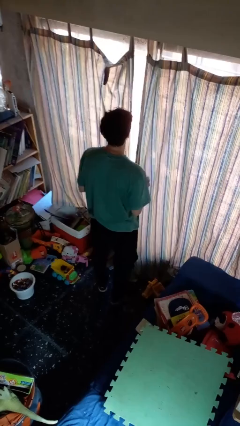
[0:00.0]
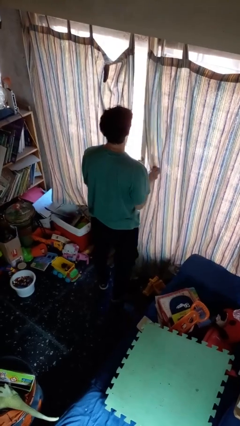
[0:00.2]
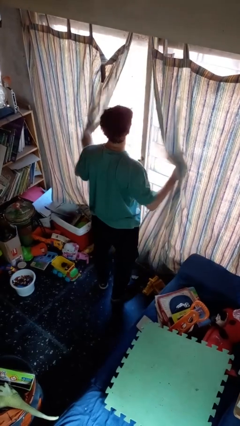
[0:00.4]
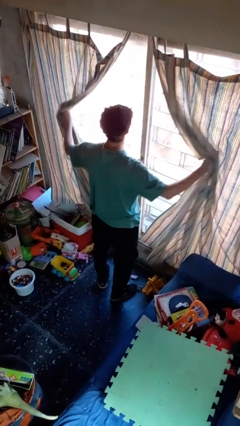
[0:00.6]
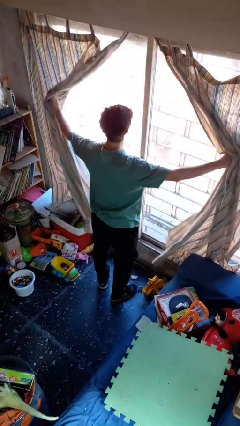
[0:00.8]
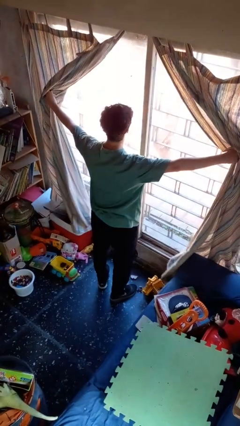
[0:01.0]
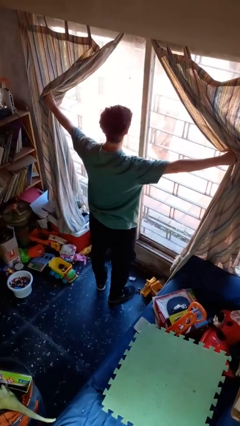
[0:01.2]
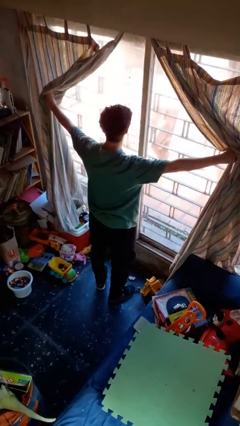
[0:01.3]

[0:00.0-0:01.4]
person opens curtains

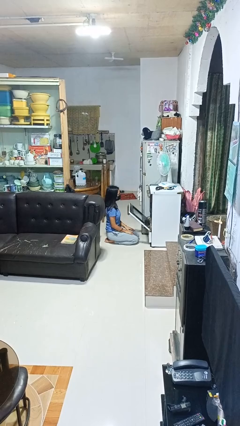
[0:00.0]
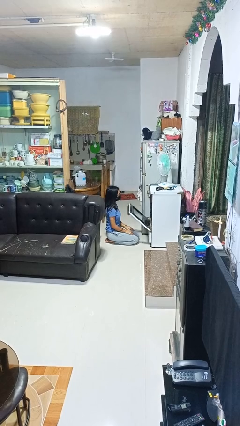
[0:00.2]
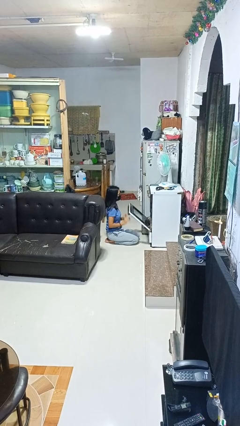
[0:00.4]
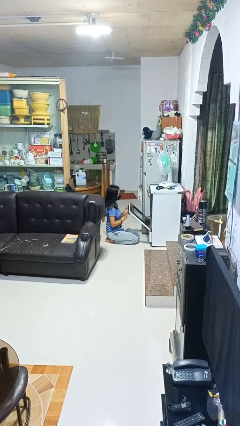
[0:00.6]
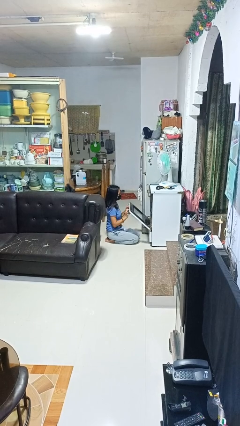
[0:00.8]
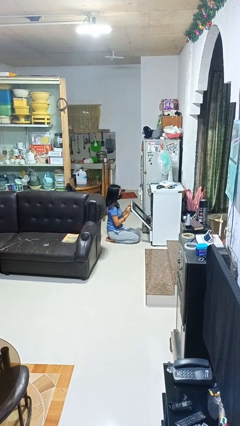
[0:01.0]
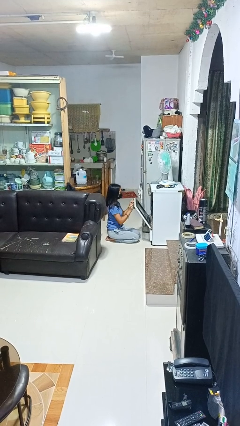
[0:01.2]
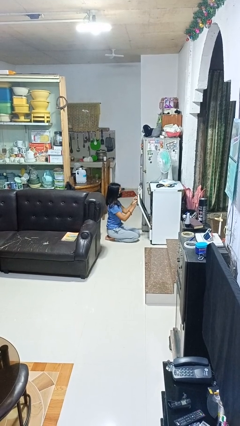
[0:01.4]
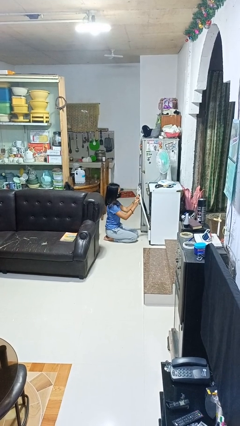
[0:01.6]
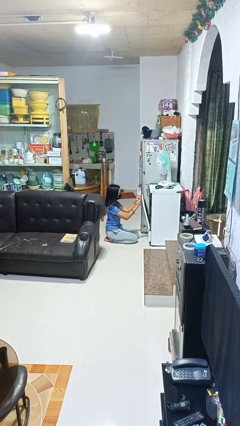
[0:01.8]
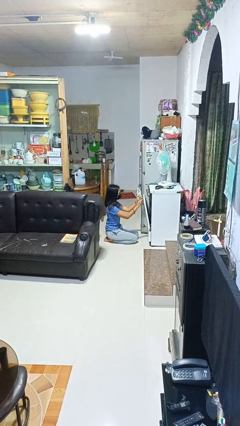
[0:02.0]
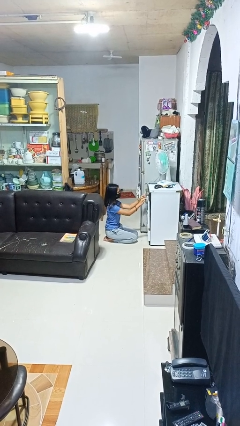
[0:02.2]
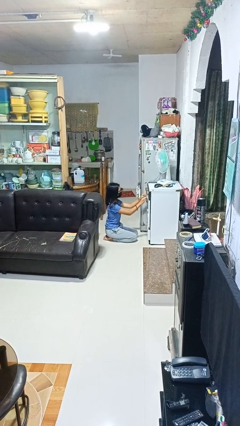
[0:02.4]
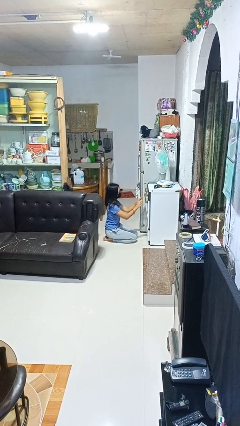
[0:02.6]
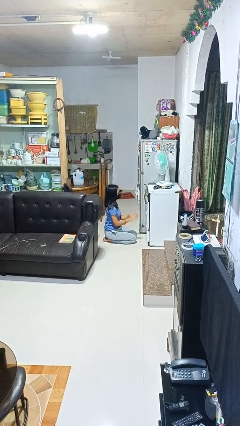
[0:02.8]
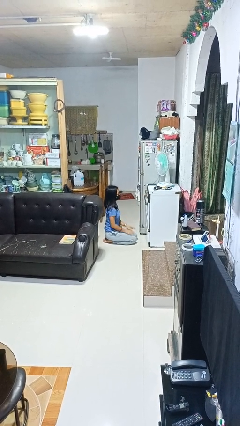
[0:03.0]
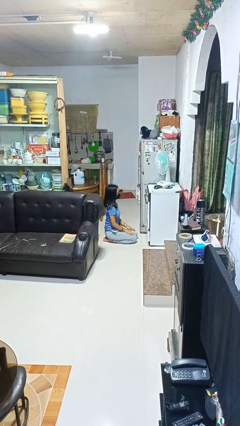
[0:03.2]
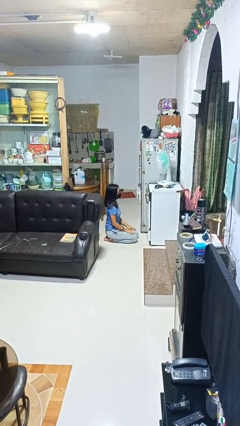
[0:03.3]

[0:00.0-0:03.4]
person closes oven door

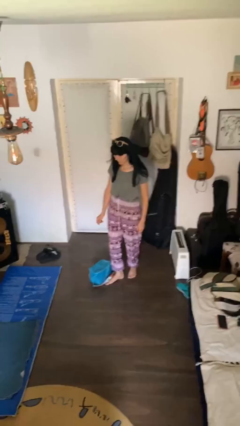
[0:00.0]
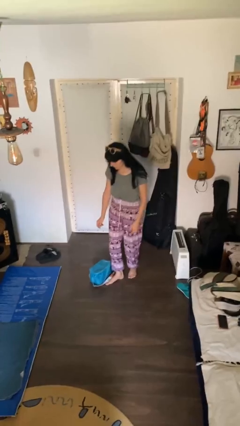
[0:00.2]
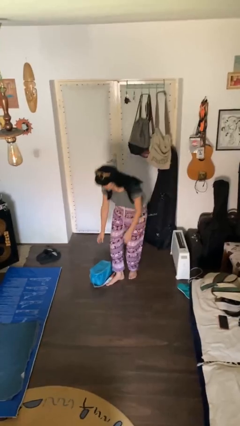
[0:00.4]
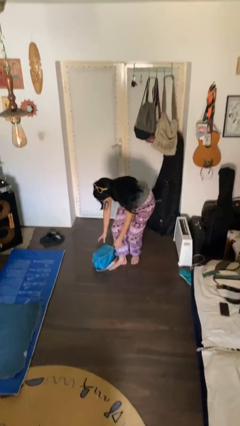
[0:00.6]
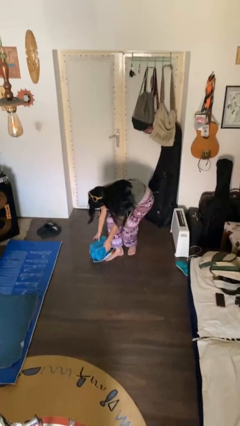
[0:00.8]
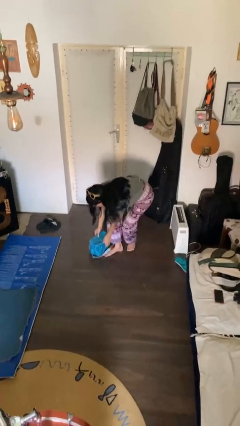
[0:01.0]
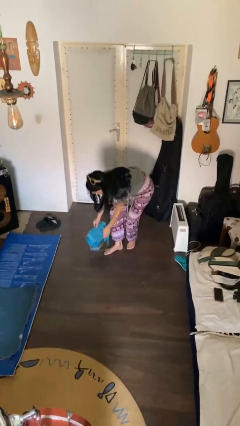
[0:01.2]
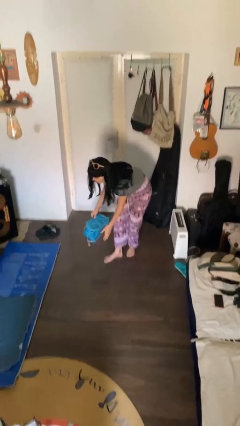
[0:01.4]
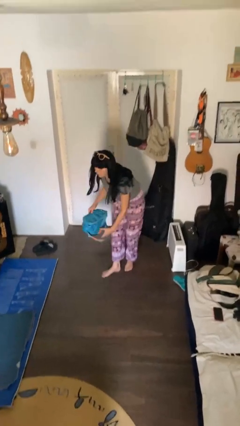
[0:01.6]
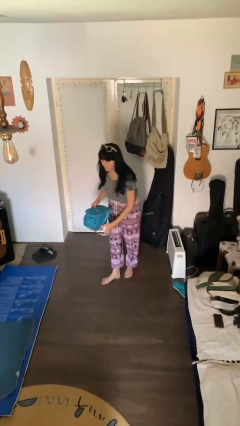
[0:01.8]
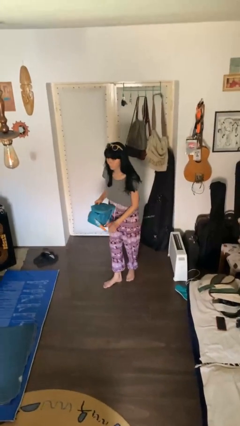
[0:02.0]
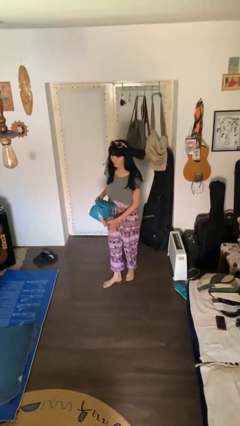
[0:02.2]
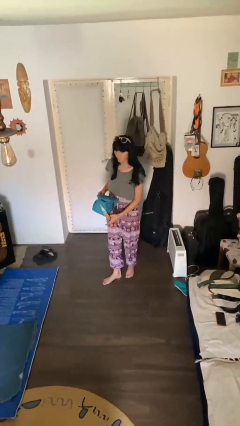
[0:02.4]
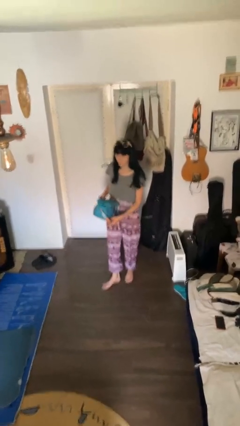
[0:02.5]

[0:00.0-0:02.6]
person picks up object from floor

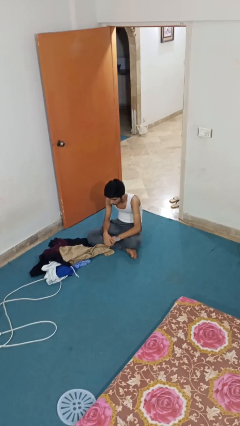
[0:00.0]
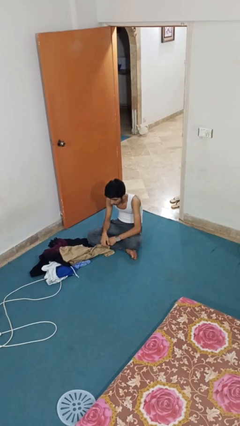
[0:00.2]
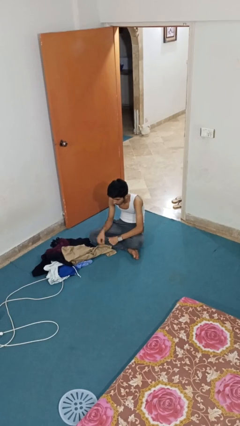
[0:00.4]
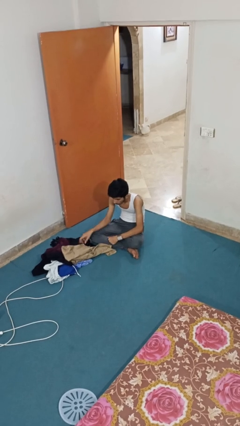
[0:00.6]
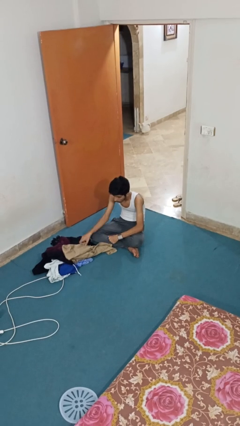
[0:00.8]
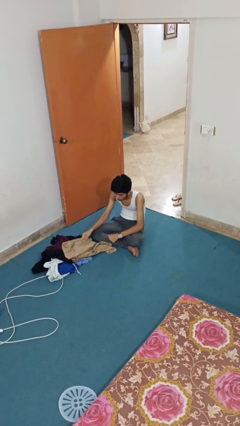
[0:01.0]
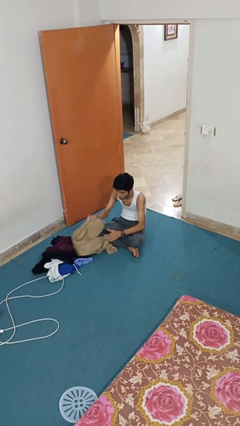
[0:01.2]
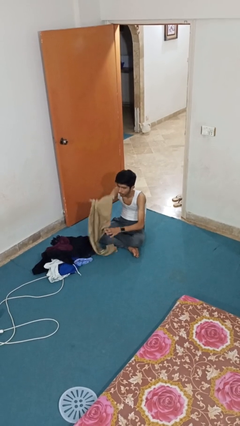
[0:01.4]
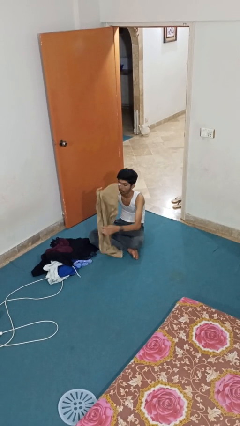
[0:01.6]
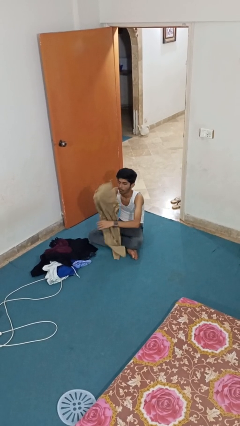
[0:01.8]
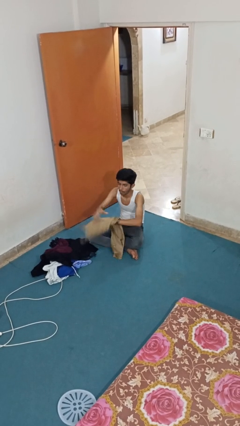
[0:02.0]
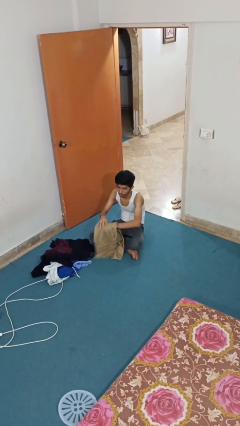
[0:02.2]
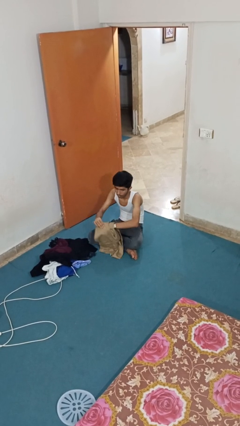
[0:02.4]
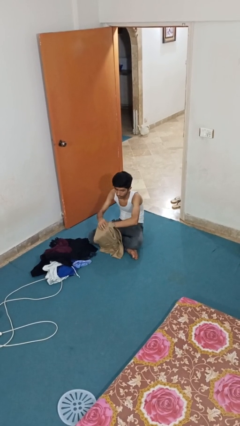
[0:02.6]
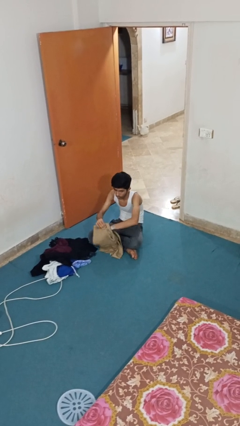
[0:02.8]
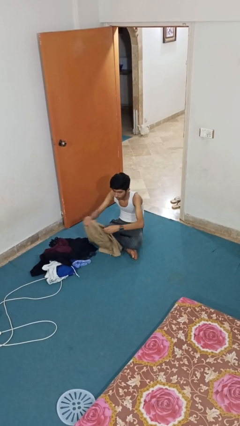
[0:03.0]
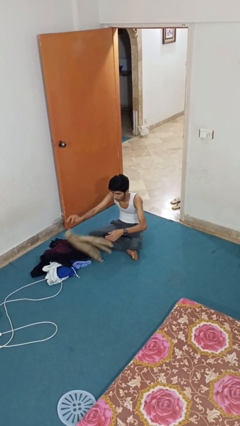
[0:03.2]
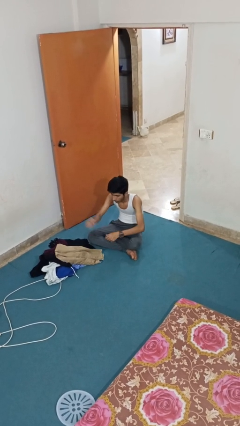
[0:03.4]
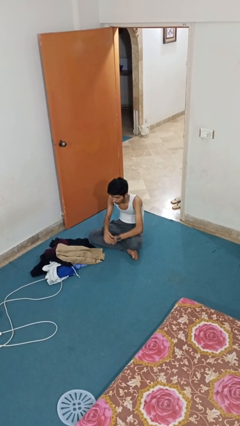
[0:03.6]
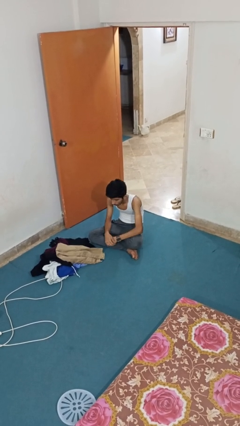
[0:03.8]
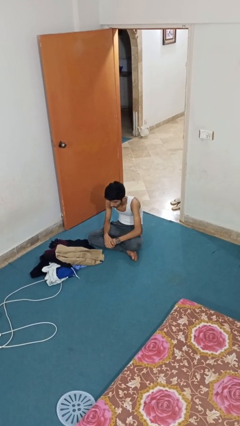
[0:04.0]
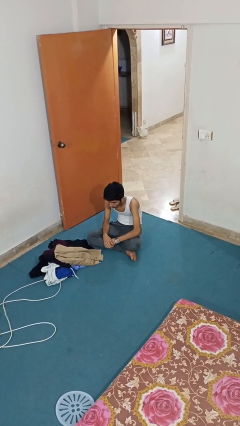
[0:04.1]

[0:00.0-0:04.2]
person folds pants

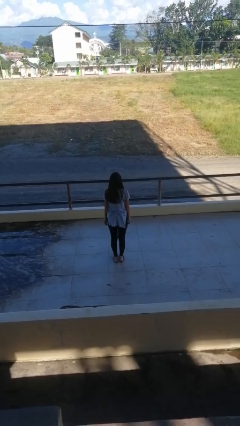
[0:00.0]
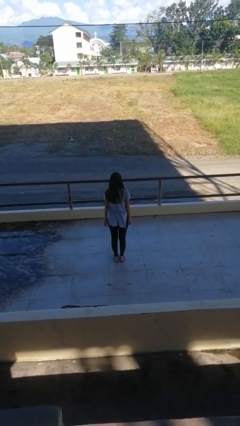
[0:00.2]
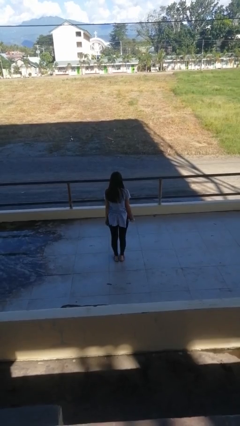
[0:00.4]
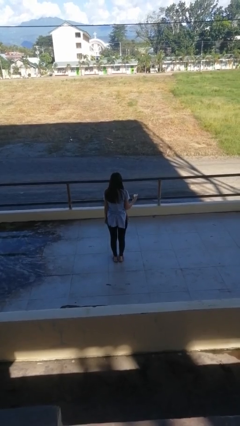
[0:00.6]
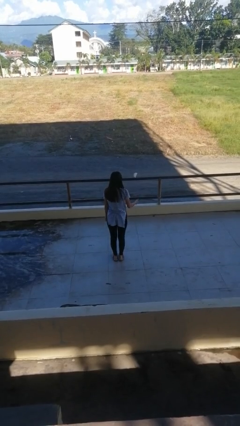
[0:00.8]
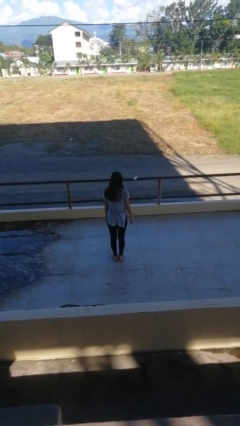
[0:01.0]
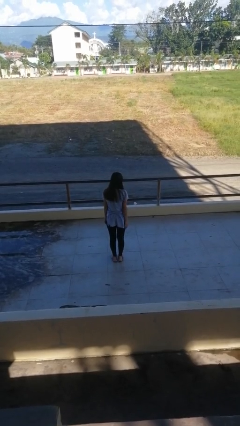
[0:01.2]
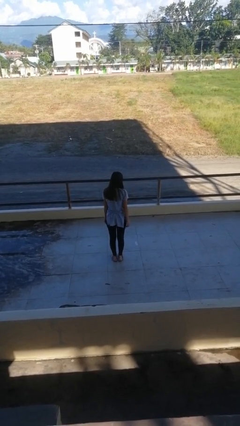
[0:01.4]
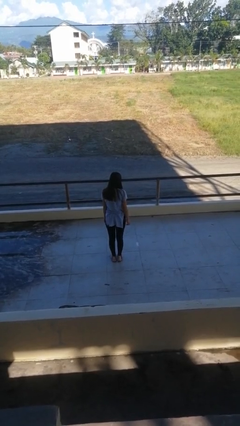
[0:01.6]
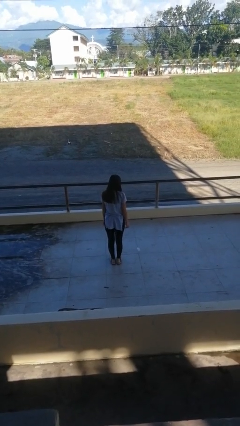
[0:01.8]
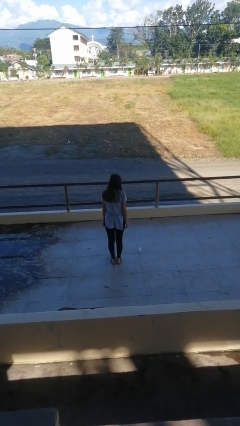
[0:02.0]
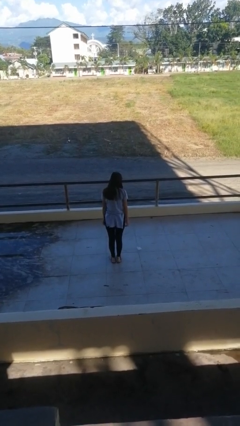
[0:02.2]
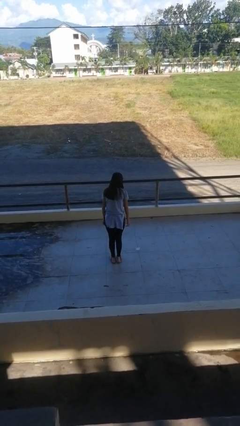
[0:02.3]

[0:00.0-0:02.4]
person throws object into air

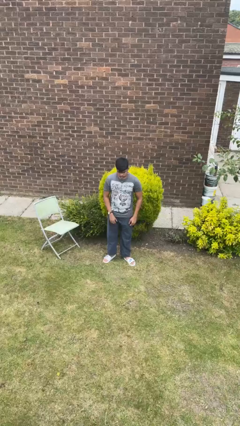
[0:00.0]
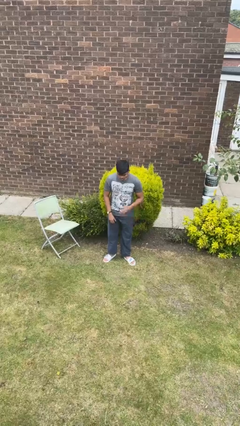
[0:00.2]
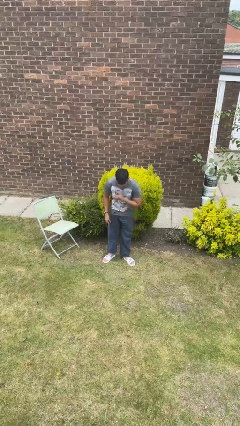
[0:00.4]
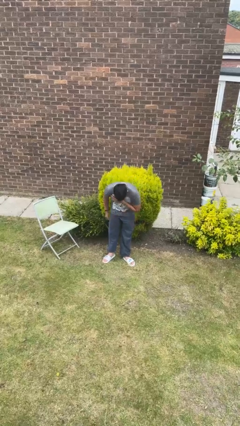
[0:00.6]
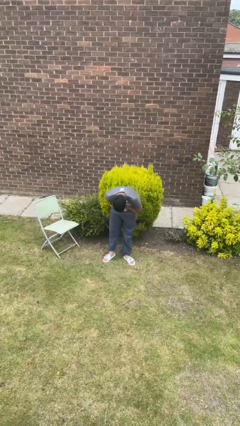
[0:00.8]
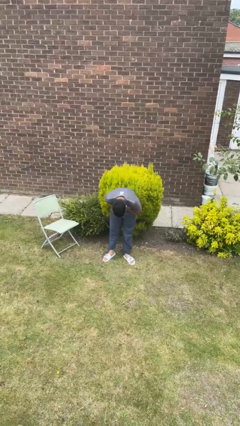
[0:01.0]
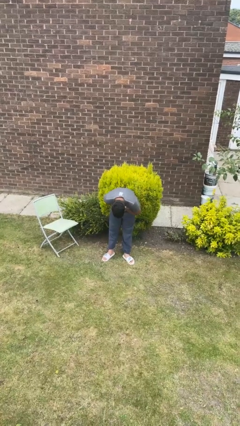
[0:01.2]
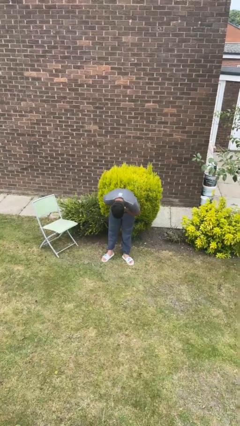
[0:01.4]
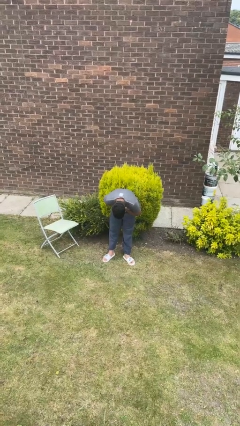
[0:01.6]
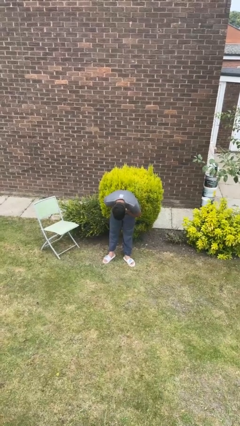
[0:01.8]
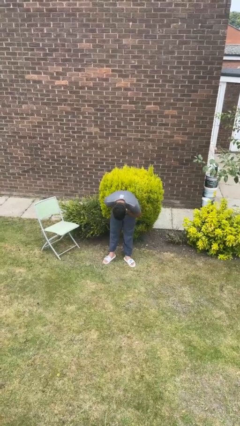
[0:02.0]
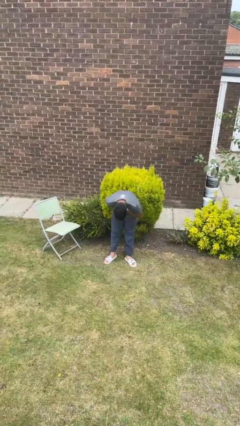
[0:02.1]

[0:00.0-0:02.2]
person bows

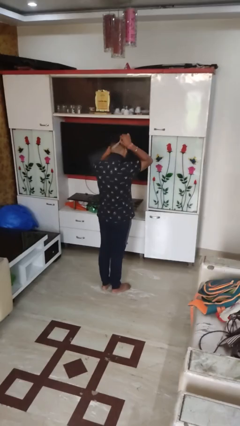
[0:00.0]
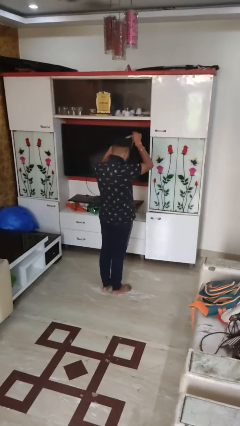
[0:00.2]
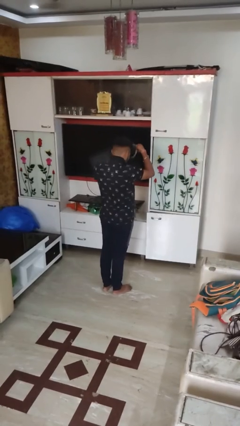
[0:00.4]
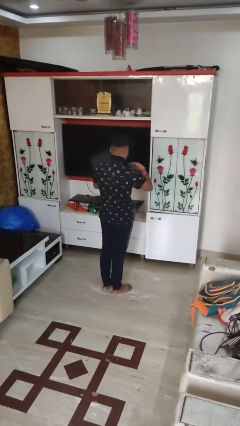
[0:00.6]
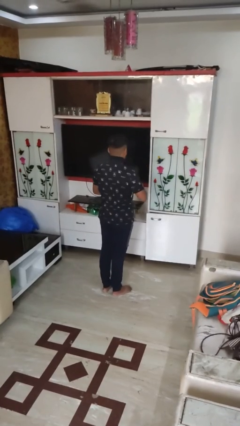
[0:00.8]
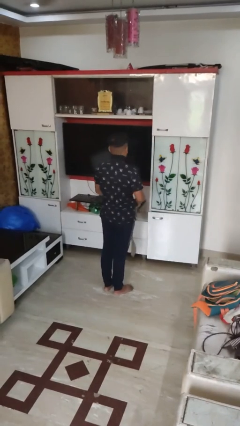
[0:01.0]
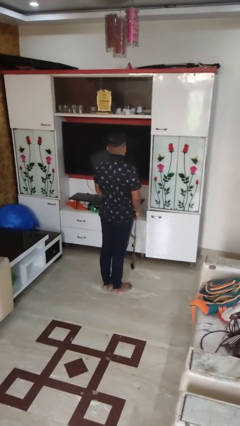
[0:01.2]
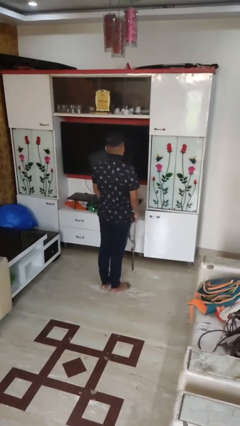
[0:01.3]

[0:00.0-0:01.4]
person takes off necktie
